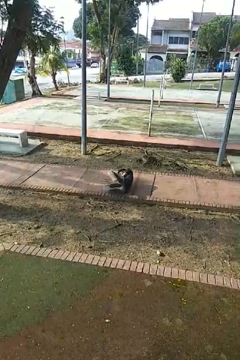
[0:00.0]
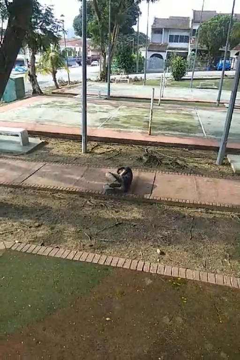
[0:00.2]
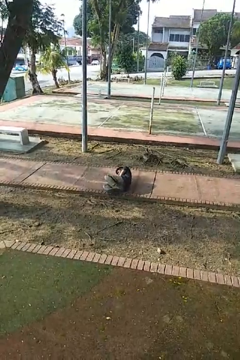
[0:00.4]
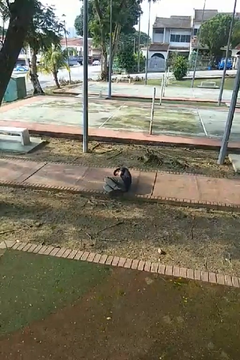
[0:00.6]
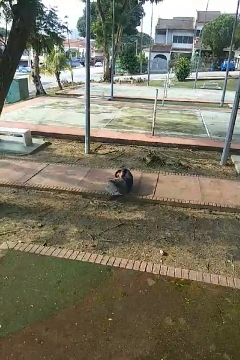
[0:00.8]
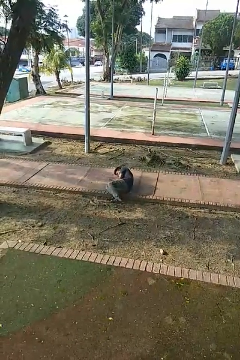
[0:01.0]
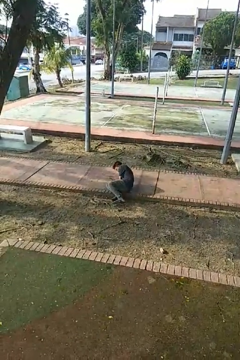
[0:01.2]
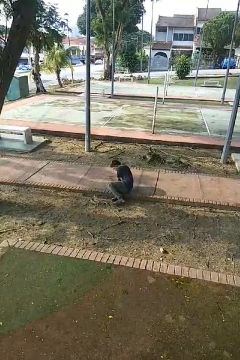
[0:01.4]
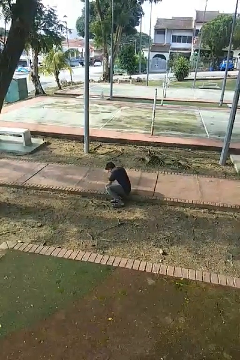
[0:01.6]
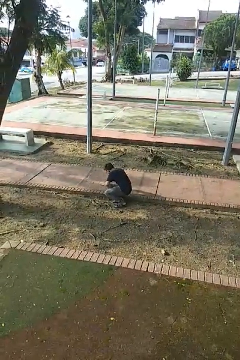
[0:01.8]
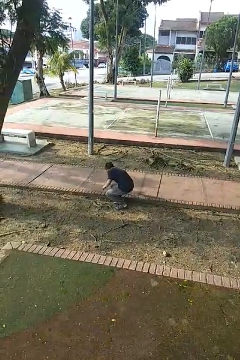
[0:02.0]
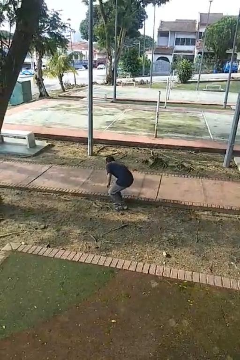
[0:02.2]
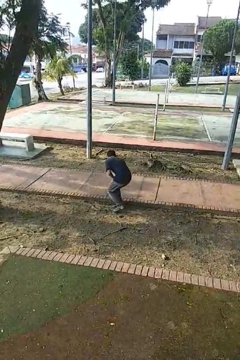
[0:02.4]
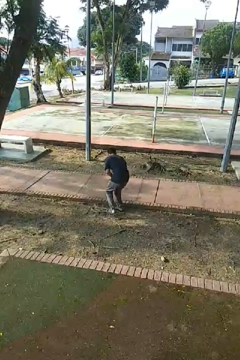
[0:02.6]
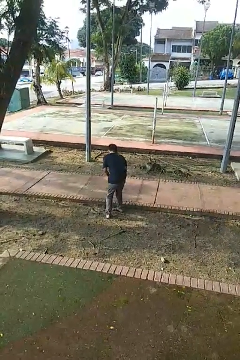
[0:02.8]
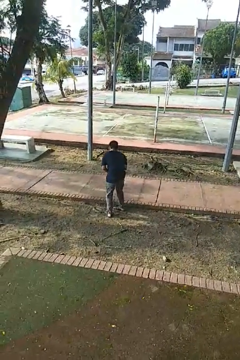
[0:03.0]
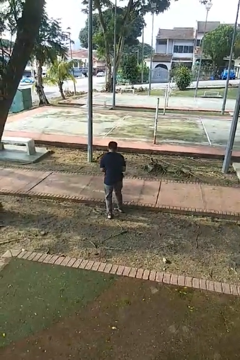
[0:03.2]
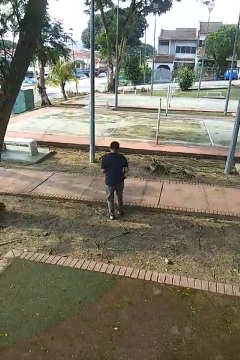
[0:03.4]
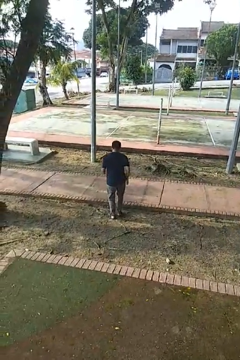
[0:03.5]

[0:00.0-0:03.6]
person stands up from floor

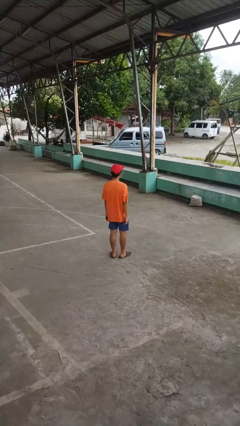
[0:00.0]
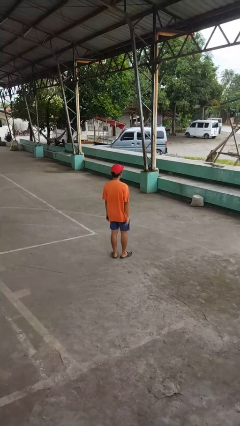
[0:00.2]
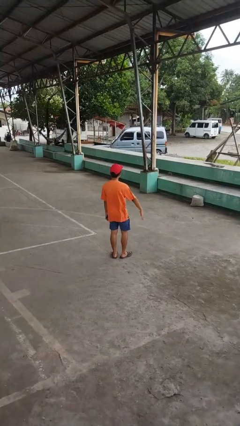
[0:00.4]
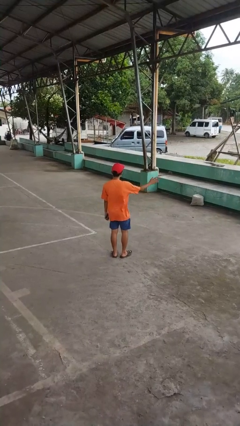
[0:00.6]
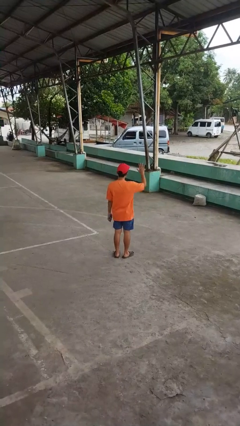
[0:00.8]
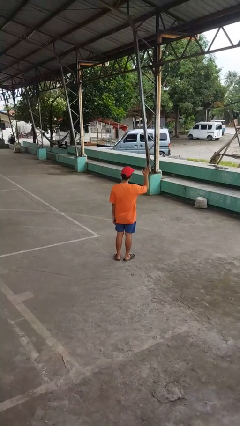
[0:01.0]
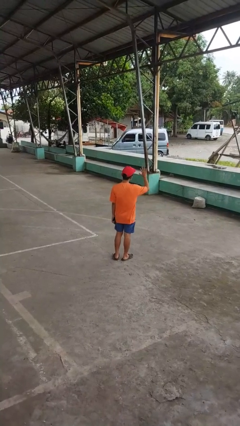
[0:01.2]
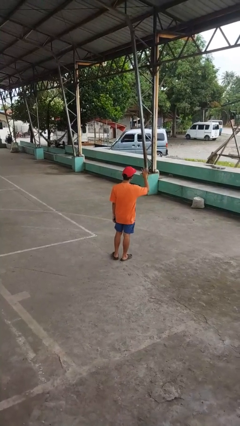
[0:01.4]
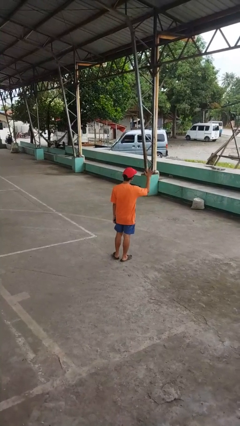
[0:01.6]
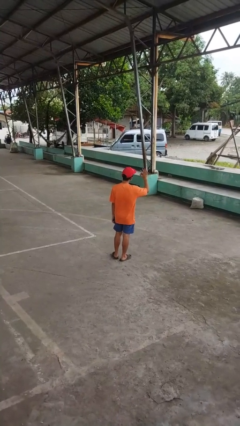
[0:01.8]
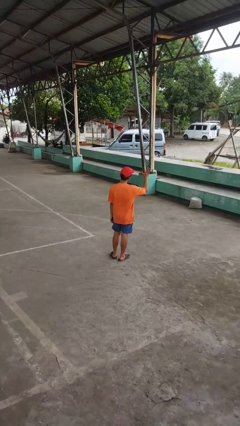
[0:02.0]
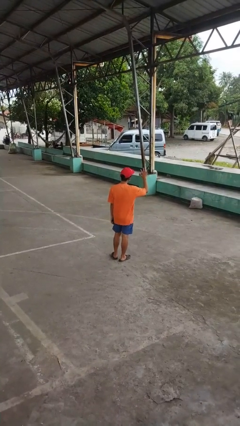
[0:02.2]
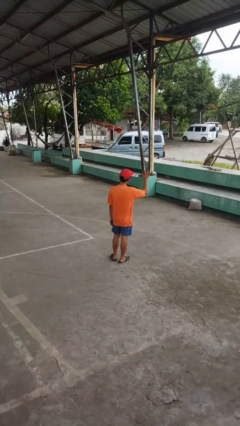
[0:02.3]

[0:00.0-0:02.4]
person waves at person

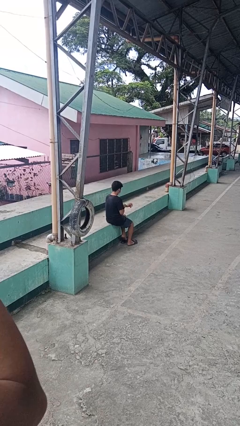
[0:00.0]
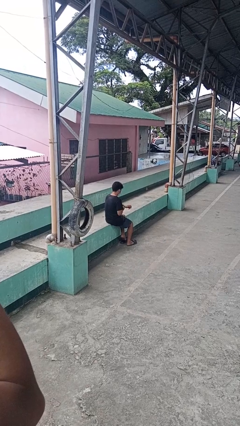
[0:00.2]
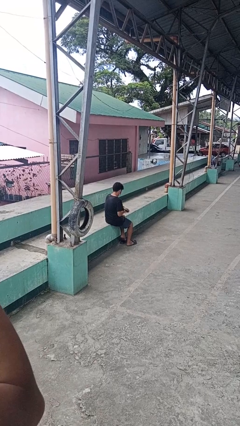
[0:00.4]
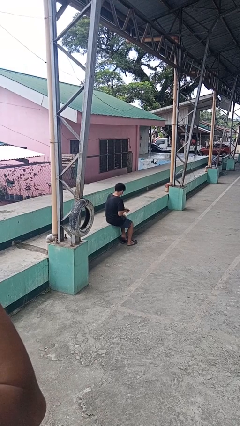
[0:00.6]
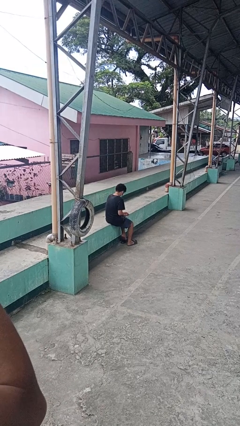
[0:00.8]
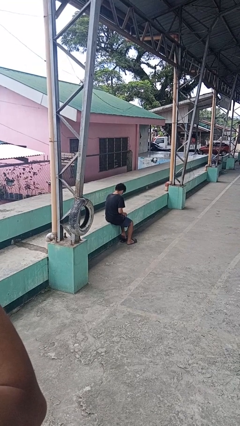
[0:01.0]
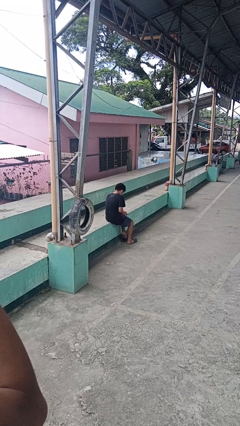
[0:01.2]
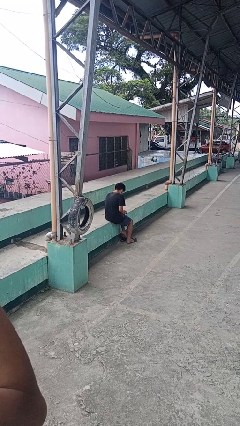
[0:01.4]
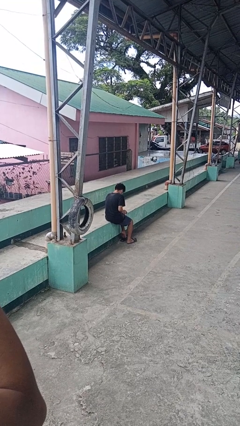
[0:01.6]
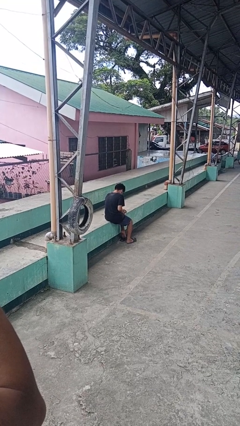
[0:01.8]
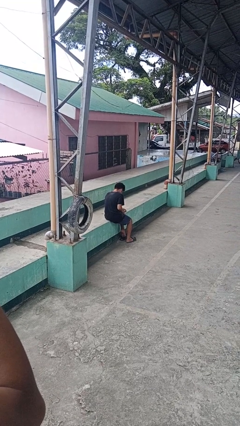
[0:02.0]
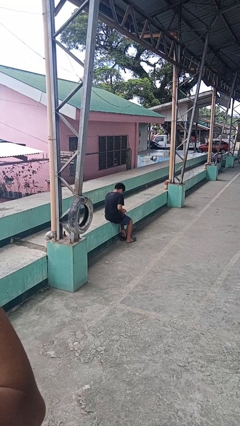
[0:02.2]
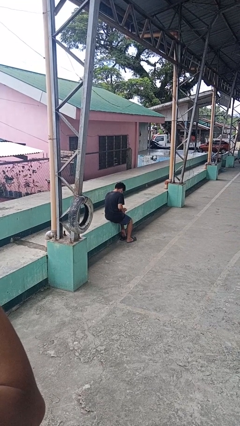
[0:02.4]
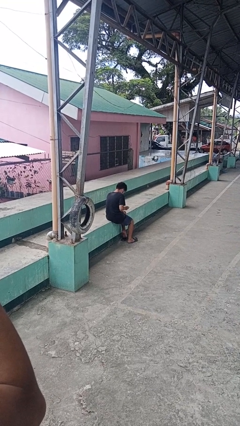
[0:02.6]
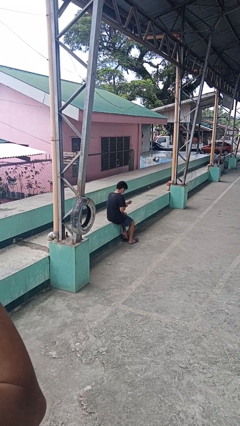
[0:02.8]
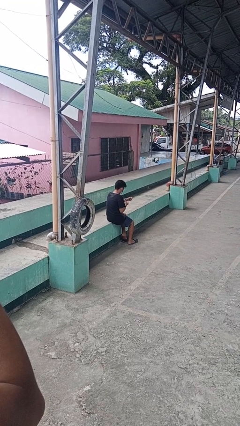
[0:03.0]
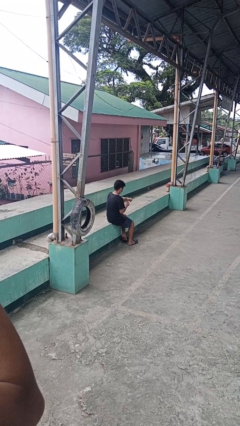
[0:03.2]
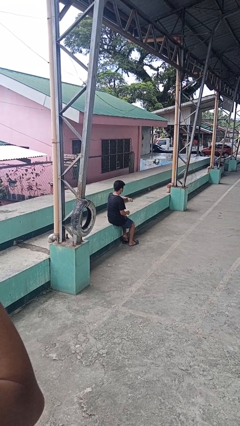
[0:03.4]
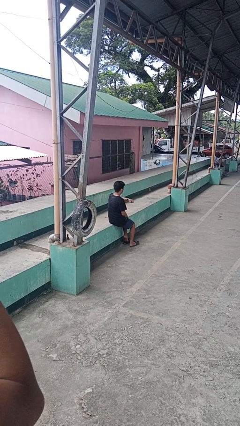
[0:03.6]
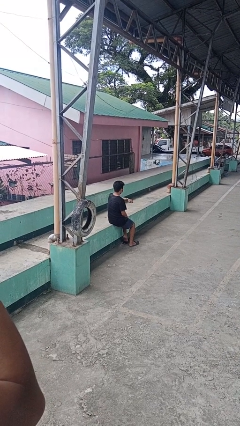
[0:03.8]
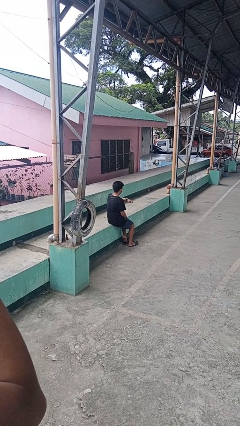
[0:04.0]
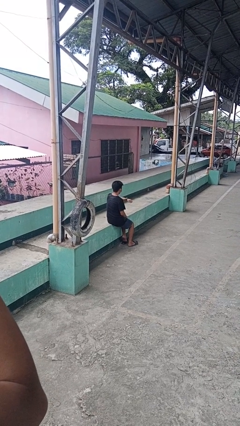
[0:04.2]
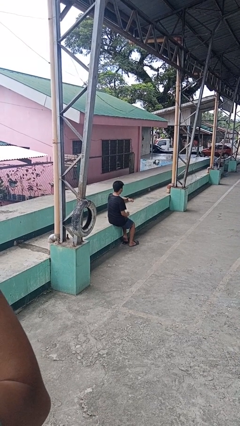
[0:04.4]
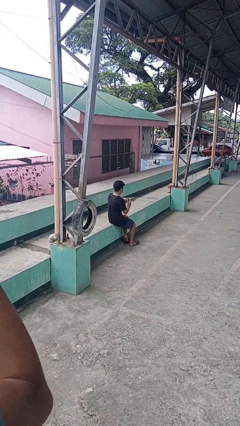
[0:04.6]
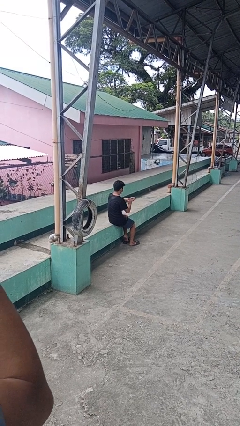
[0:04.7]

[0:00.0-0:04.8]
person puts on wristwatch

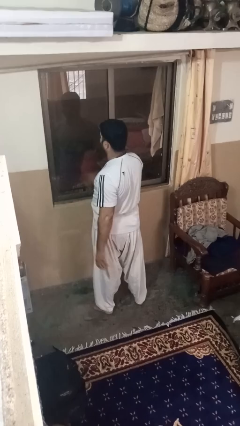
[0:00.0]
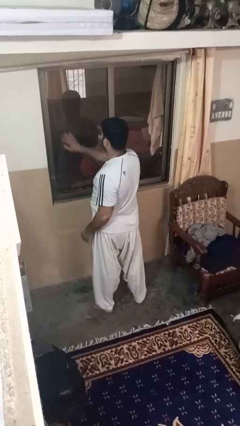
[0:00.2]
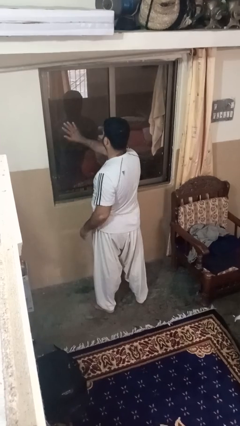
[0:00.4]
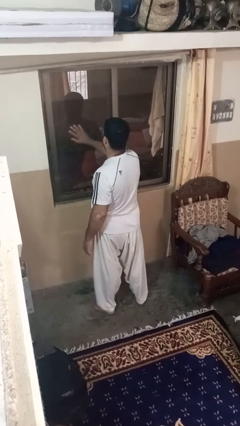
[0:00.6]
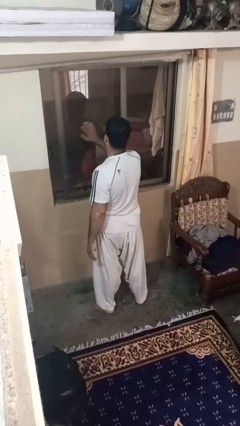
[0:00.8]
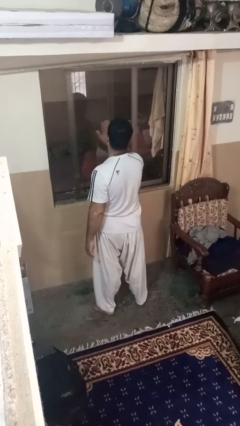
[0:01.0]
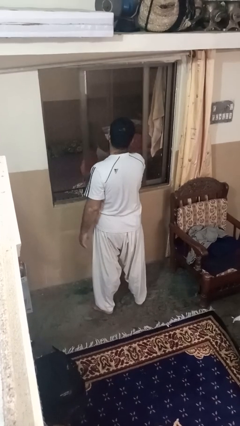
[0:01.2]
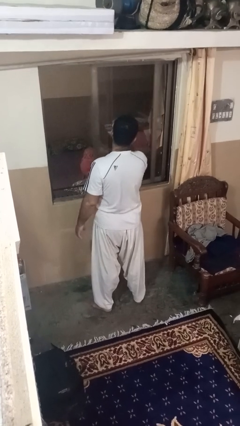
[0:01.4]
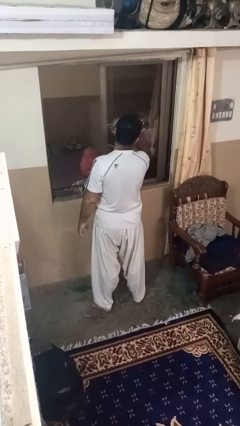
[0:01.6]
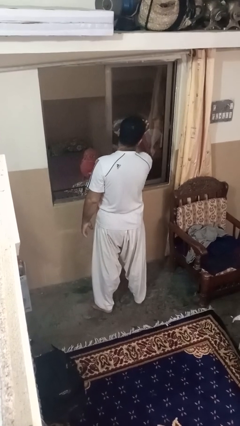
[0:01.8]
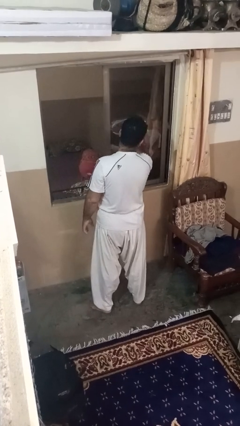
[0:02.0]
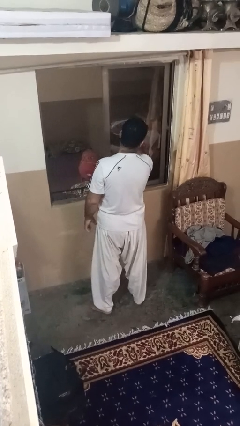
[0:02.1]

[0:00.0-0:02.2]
person opens home window

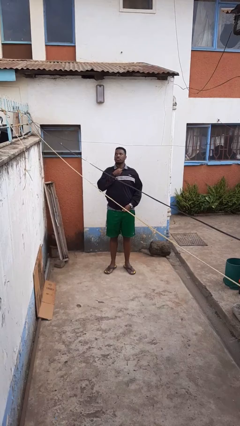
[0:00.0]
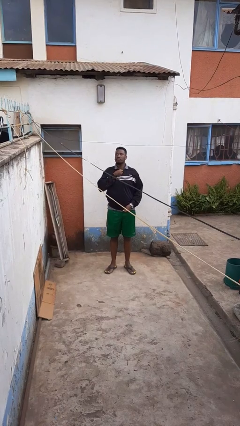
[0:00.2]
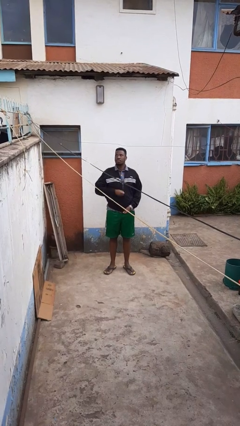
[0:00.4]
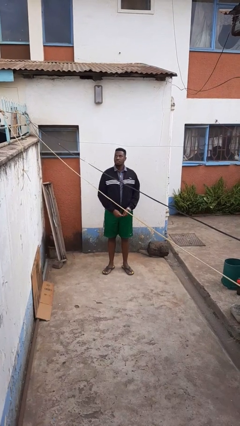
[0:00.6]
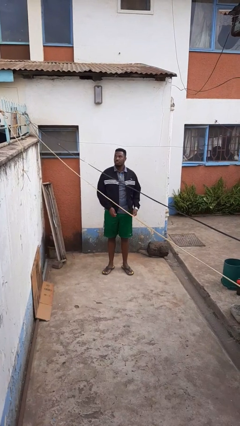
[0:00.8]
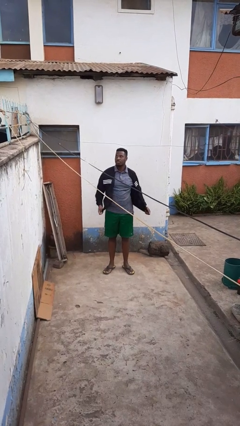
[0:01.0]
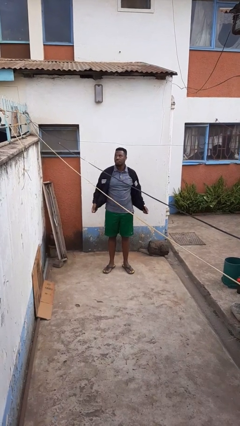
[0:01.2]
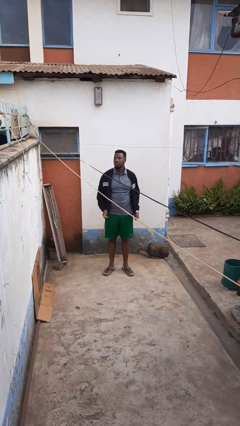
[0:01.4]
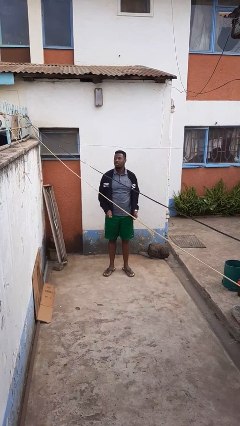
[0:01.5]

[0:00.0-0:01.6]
person unzips jacket

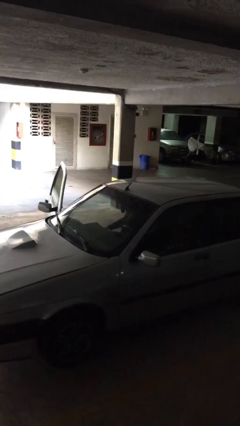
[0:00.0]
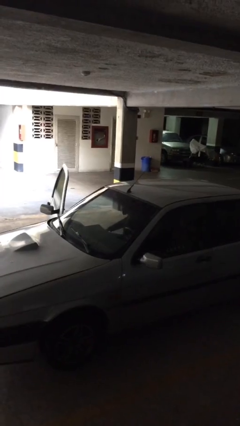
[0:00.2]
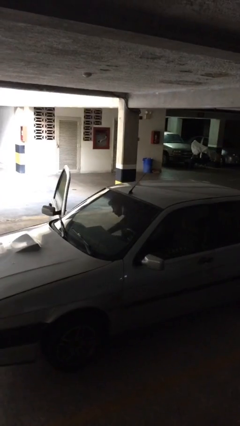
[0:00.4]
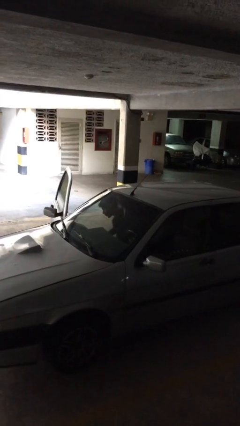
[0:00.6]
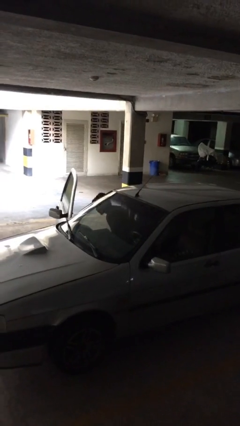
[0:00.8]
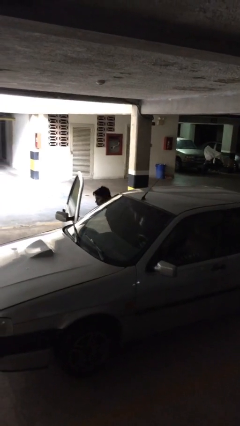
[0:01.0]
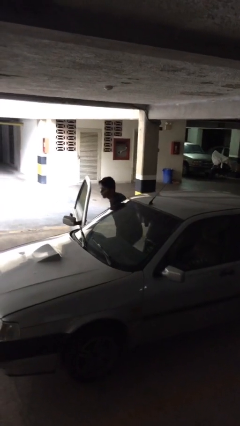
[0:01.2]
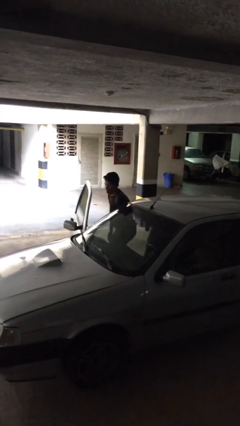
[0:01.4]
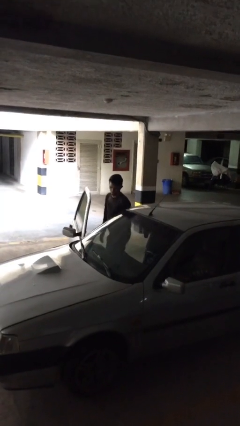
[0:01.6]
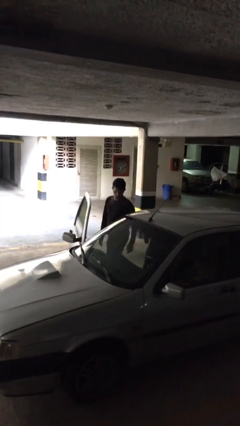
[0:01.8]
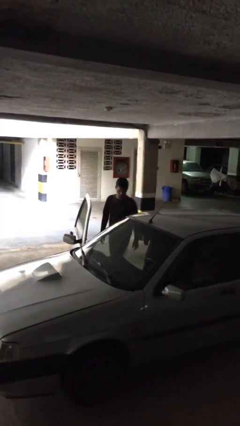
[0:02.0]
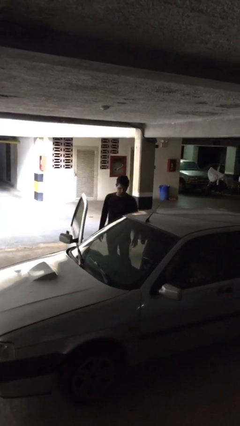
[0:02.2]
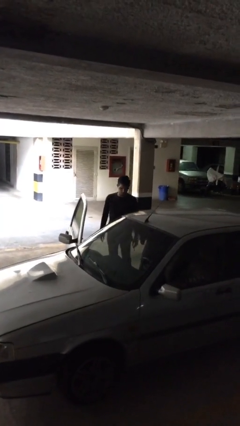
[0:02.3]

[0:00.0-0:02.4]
person exits car

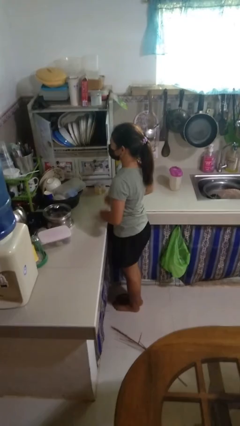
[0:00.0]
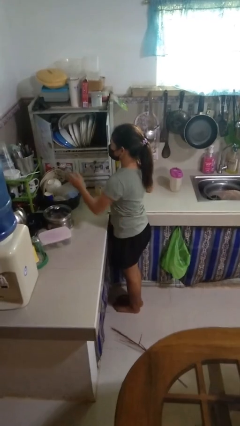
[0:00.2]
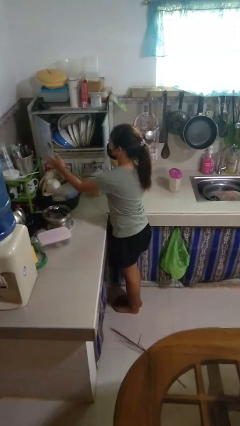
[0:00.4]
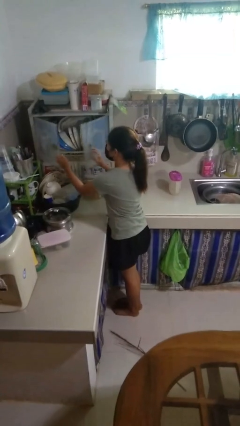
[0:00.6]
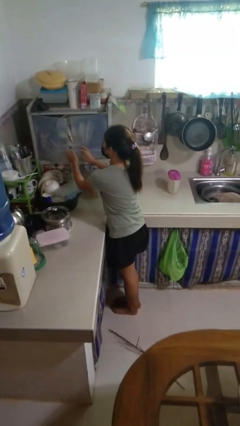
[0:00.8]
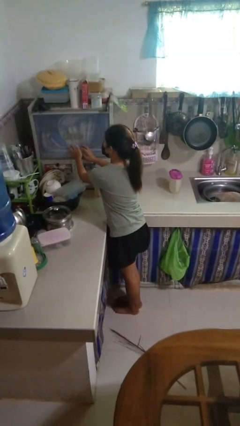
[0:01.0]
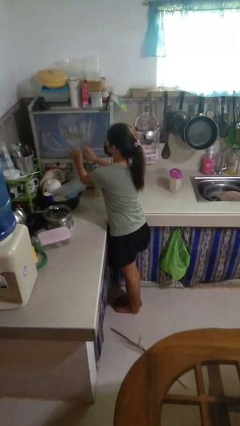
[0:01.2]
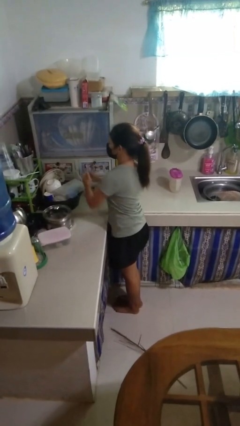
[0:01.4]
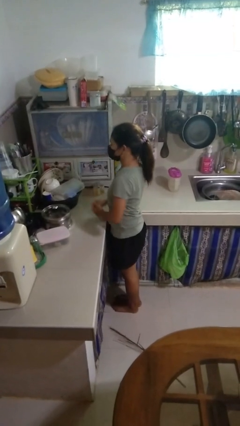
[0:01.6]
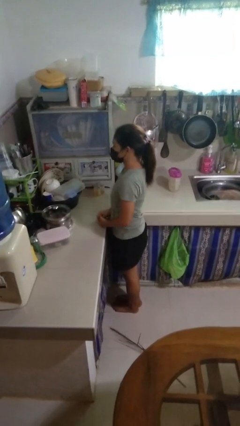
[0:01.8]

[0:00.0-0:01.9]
person closes kitchen drawer
